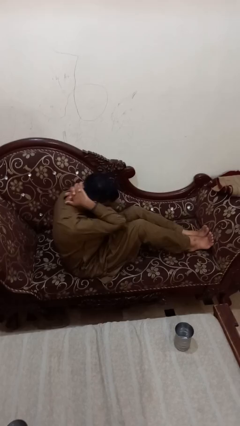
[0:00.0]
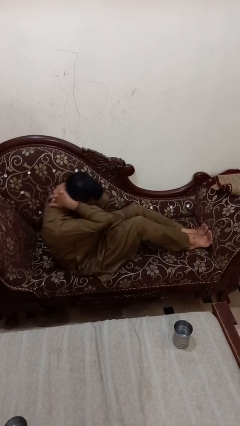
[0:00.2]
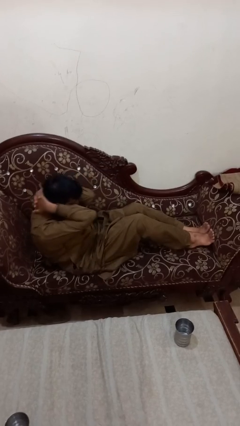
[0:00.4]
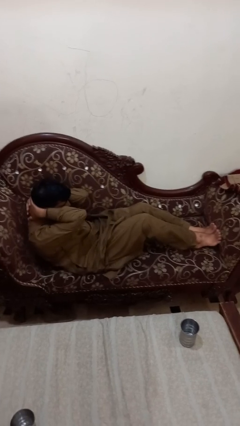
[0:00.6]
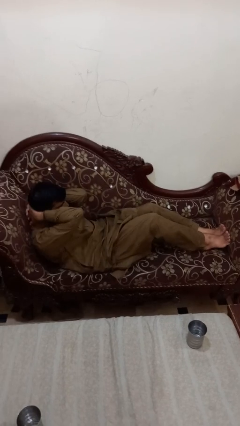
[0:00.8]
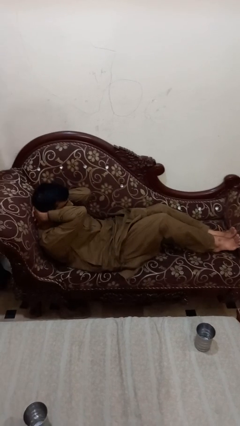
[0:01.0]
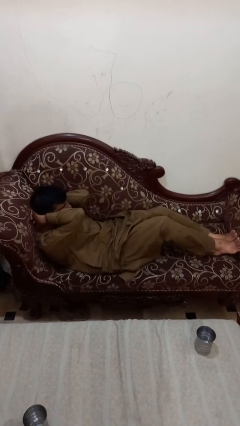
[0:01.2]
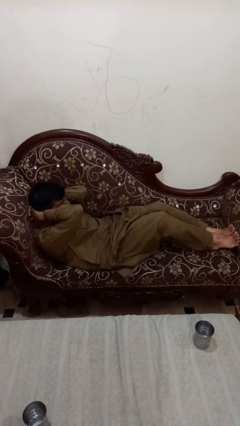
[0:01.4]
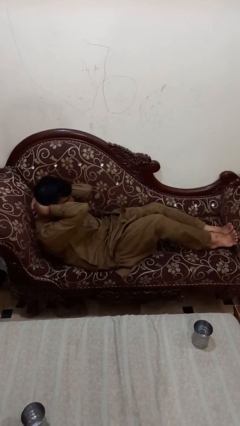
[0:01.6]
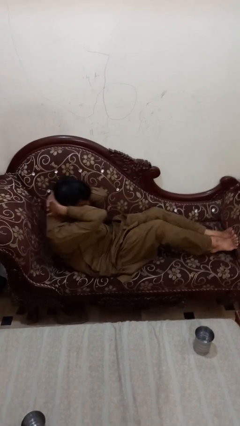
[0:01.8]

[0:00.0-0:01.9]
person exercises with situp

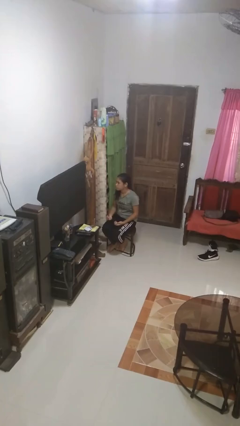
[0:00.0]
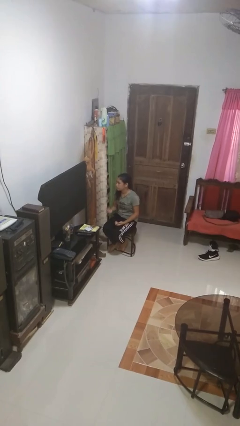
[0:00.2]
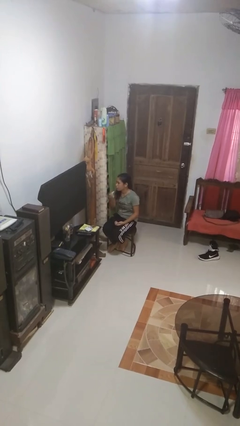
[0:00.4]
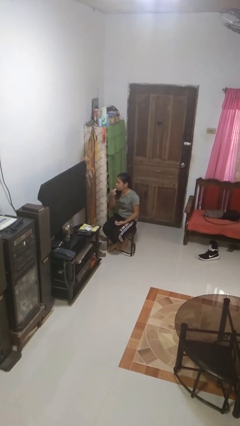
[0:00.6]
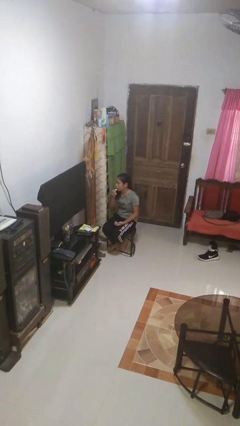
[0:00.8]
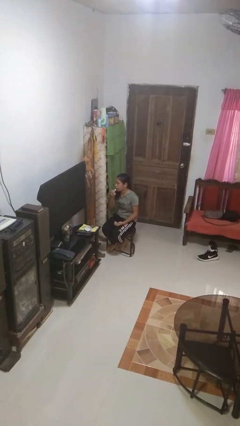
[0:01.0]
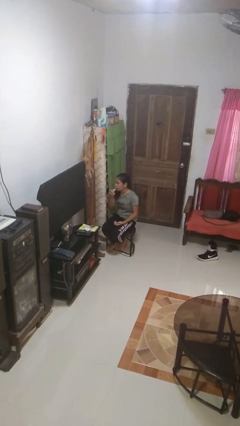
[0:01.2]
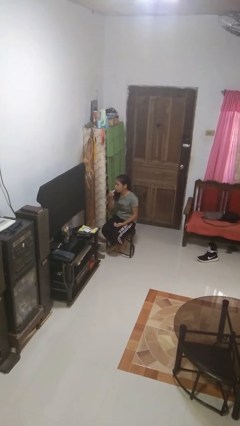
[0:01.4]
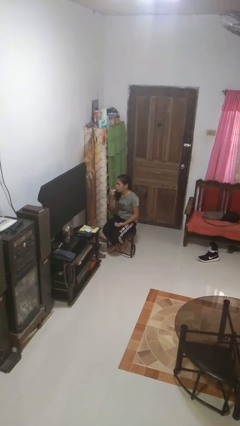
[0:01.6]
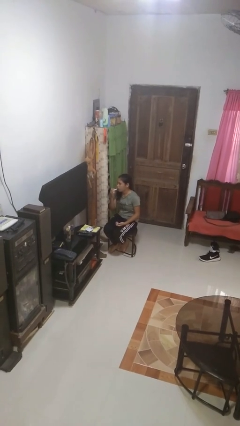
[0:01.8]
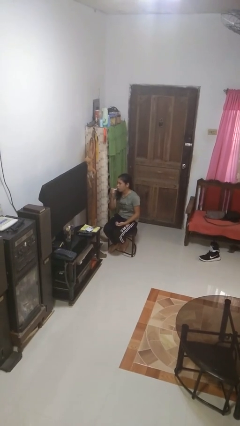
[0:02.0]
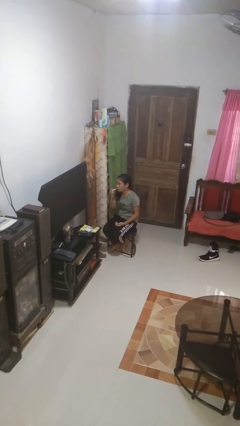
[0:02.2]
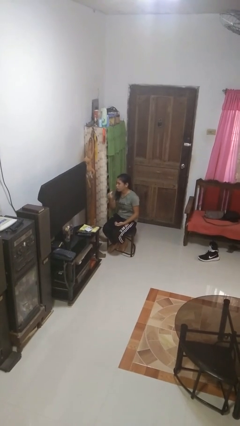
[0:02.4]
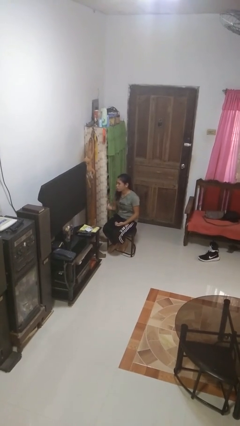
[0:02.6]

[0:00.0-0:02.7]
person applies lip makeup

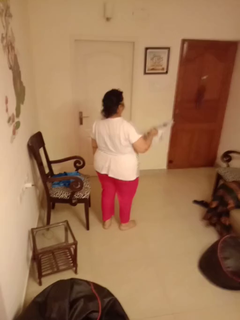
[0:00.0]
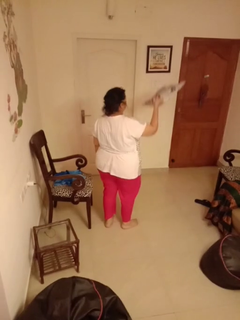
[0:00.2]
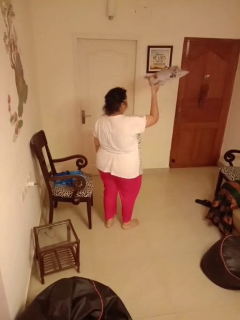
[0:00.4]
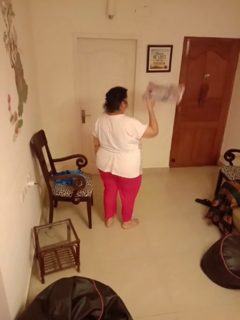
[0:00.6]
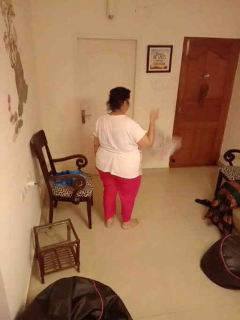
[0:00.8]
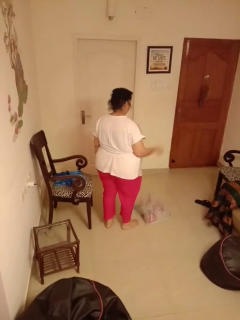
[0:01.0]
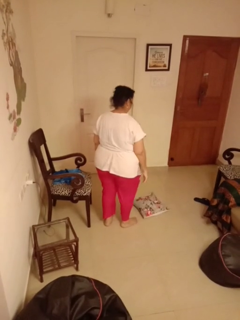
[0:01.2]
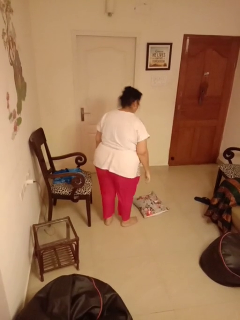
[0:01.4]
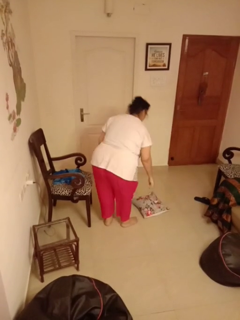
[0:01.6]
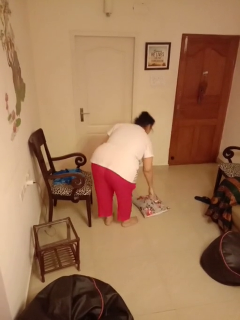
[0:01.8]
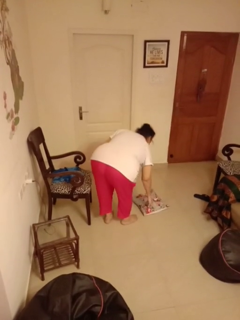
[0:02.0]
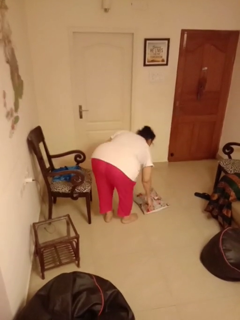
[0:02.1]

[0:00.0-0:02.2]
person throws object into air

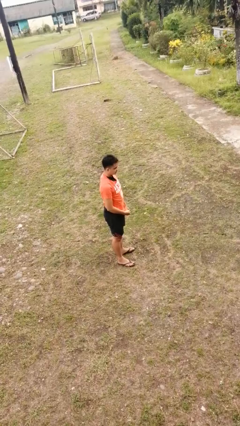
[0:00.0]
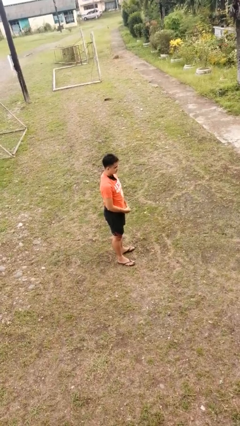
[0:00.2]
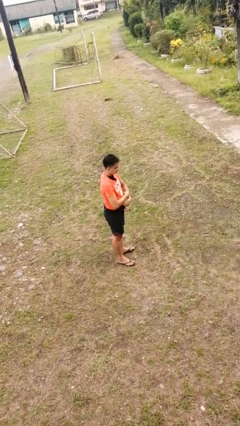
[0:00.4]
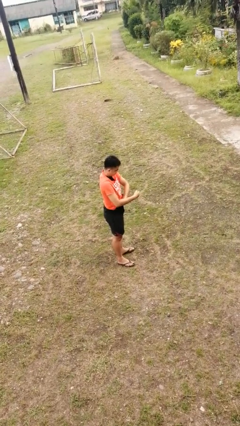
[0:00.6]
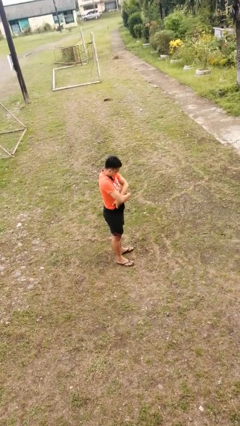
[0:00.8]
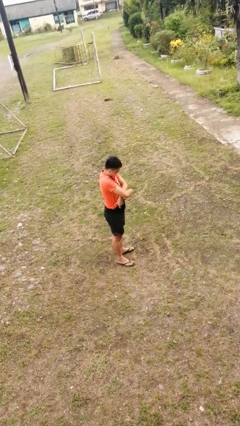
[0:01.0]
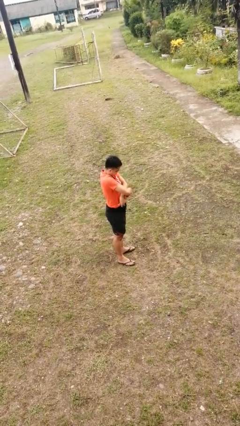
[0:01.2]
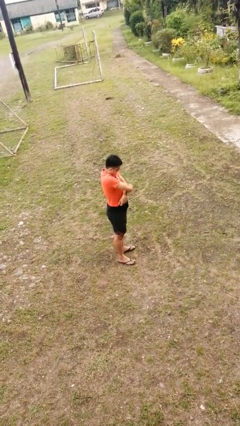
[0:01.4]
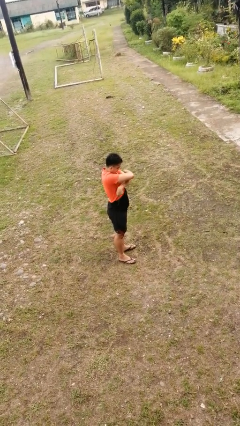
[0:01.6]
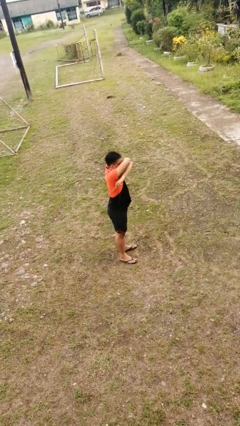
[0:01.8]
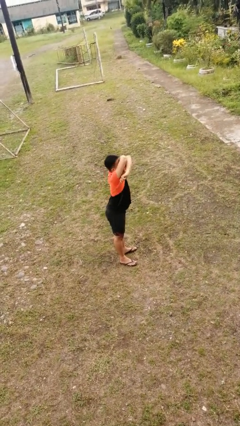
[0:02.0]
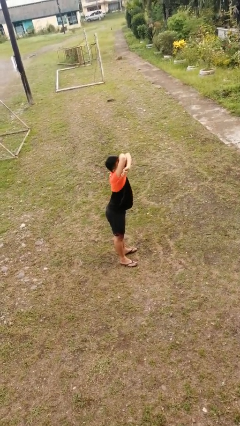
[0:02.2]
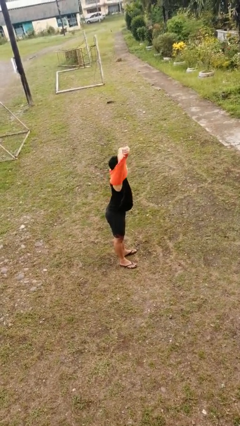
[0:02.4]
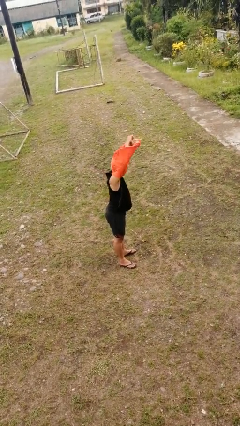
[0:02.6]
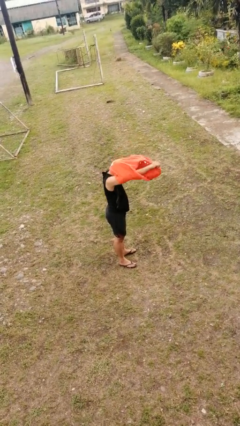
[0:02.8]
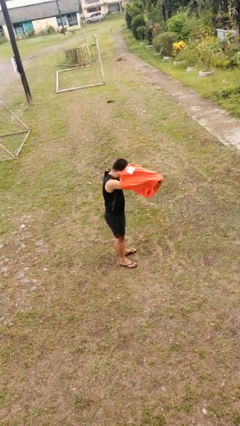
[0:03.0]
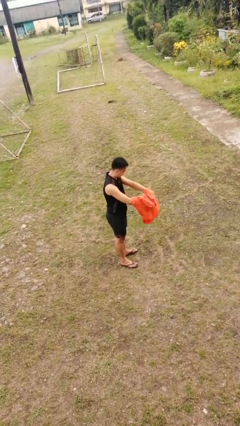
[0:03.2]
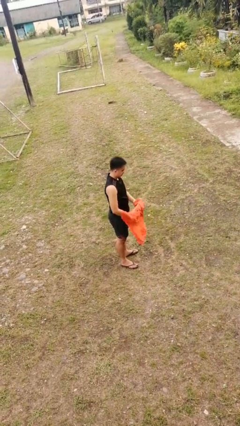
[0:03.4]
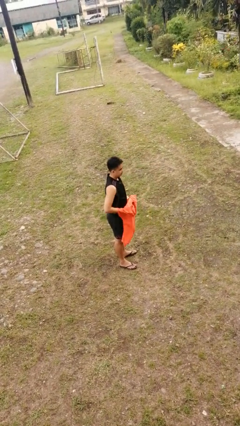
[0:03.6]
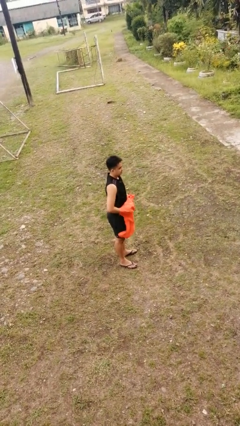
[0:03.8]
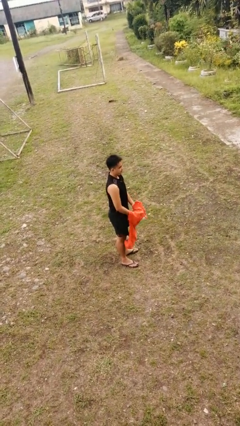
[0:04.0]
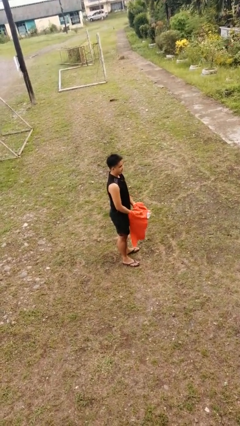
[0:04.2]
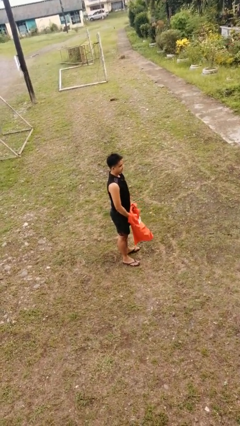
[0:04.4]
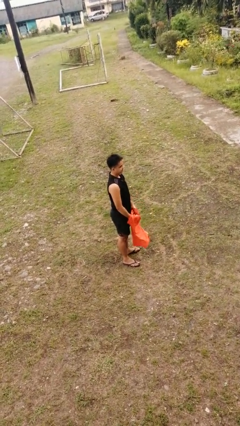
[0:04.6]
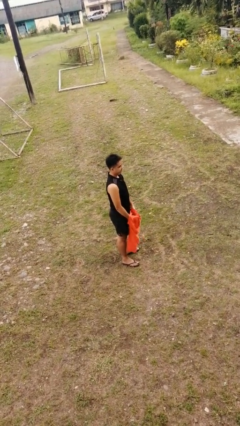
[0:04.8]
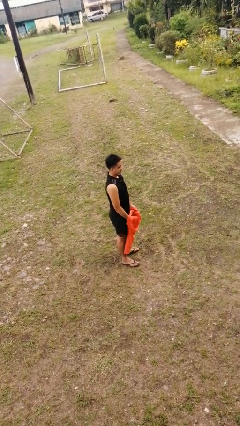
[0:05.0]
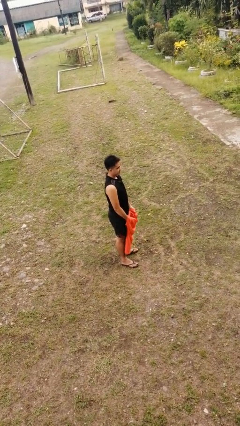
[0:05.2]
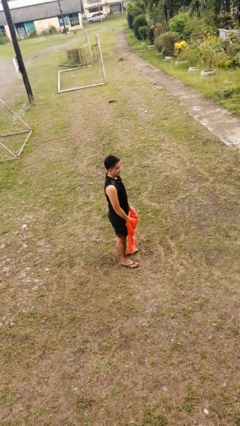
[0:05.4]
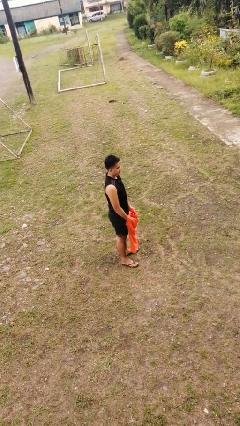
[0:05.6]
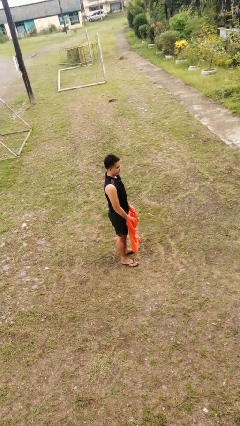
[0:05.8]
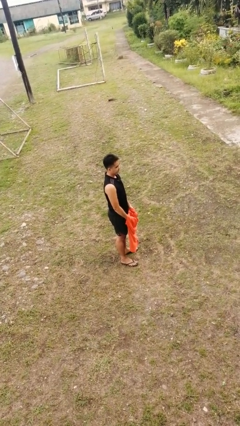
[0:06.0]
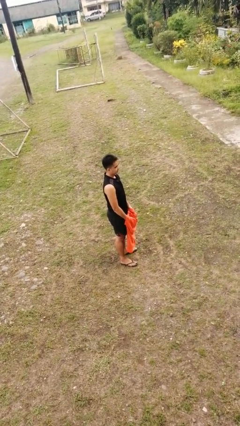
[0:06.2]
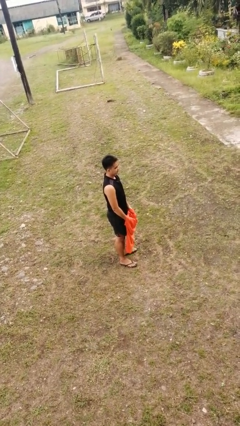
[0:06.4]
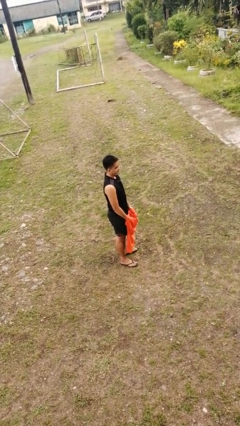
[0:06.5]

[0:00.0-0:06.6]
person takes off shirt

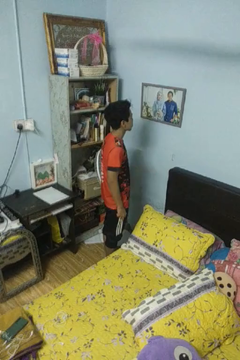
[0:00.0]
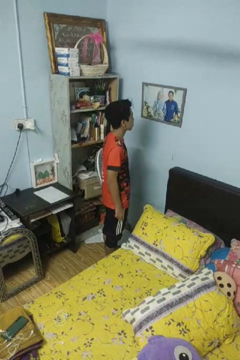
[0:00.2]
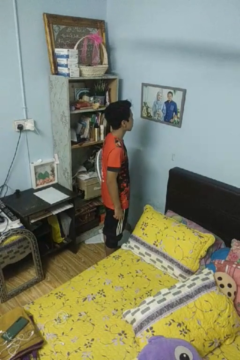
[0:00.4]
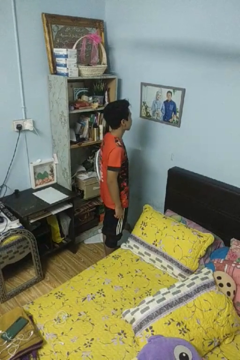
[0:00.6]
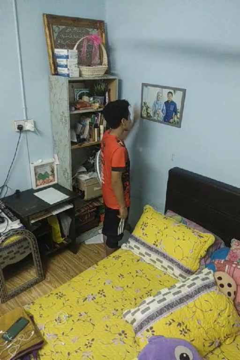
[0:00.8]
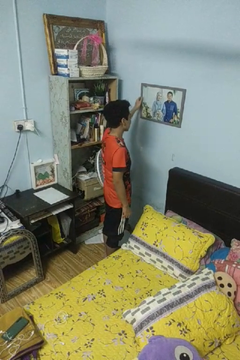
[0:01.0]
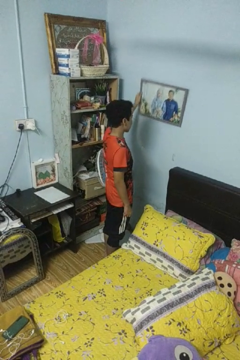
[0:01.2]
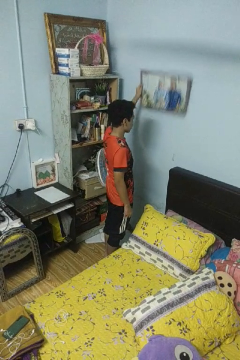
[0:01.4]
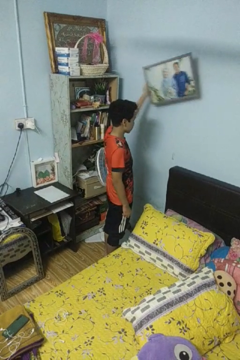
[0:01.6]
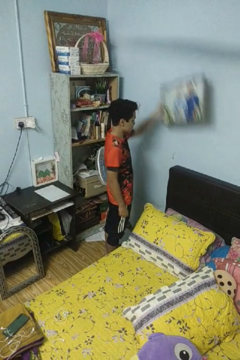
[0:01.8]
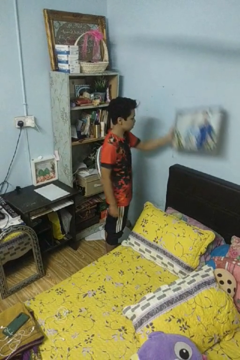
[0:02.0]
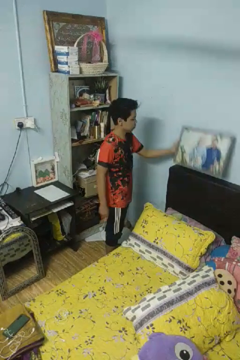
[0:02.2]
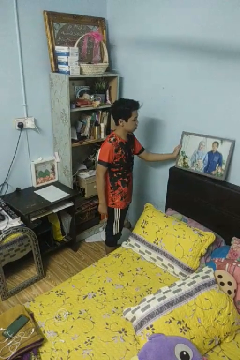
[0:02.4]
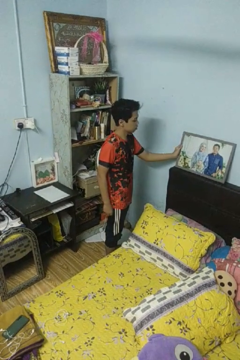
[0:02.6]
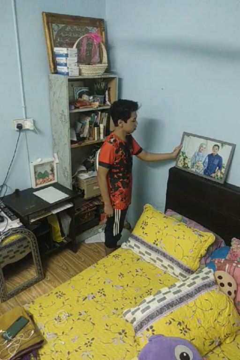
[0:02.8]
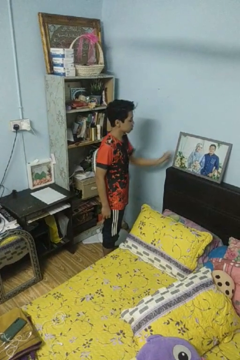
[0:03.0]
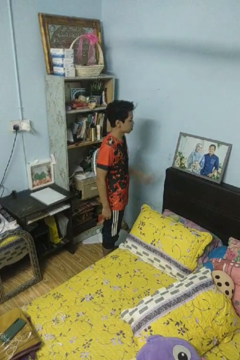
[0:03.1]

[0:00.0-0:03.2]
person takes down picture frame

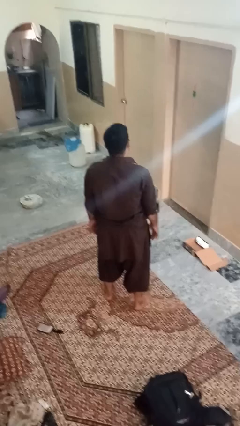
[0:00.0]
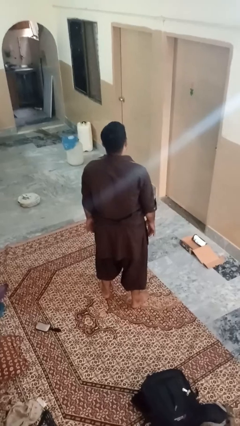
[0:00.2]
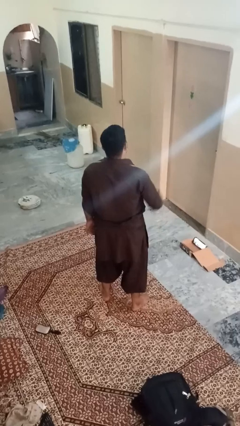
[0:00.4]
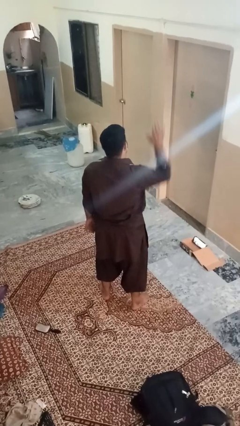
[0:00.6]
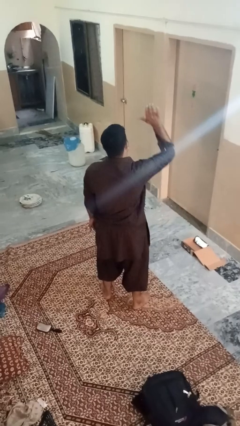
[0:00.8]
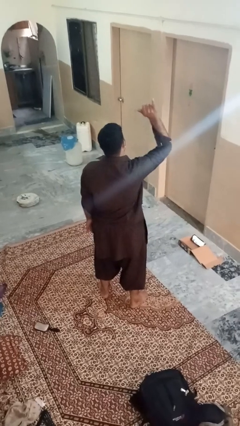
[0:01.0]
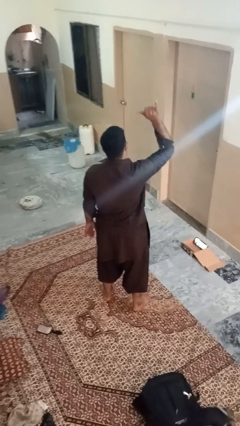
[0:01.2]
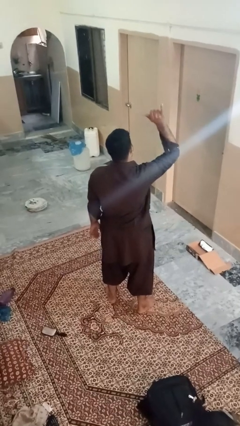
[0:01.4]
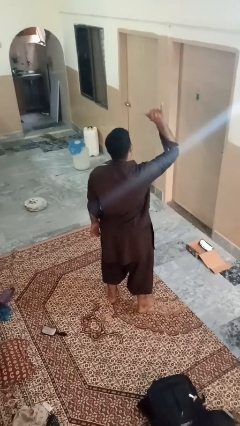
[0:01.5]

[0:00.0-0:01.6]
person gestures hang loose

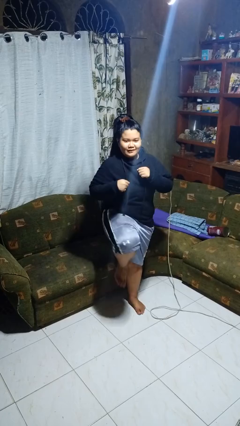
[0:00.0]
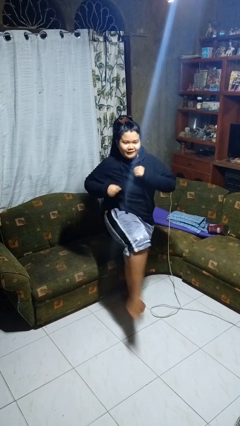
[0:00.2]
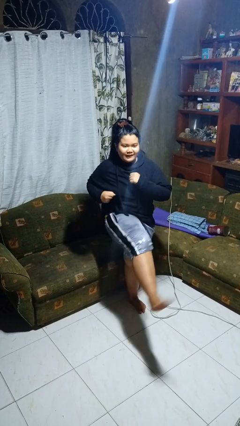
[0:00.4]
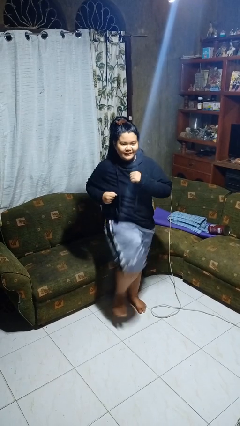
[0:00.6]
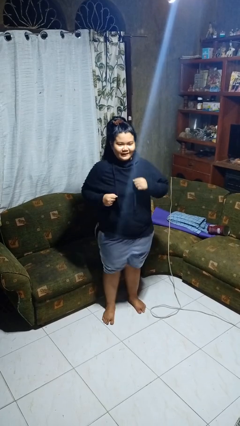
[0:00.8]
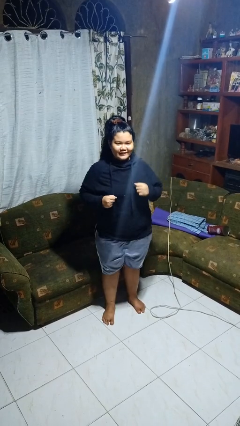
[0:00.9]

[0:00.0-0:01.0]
person karate kicks
